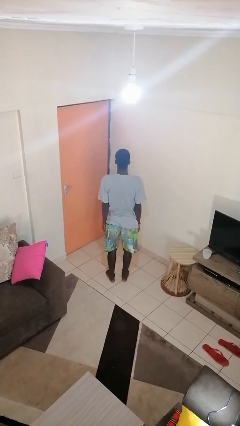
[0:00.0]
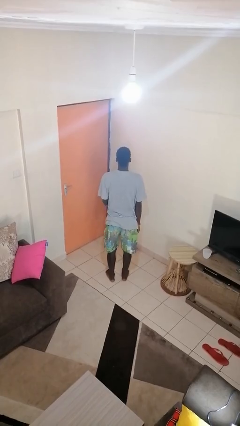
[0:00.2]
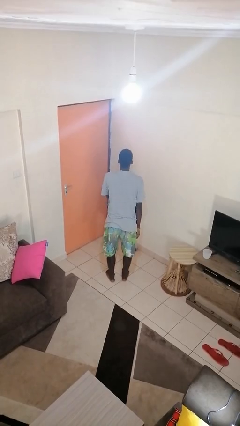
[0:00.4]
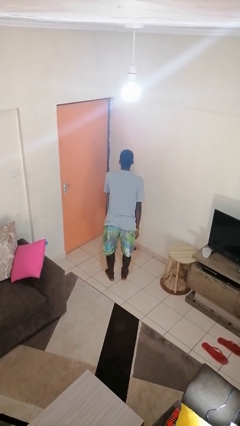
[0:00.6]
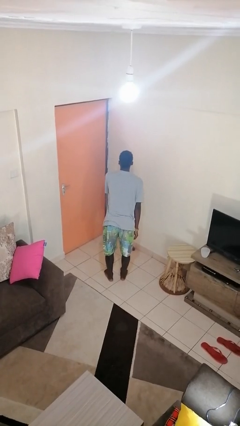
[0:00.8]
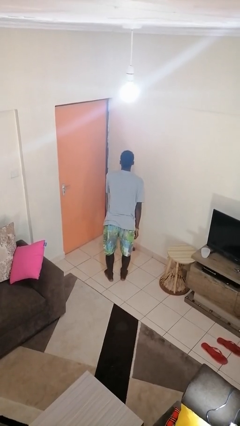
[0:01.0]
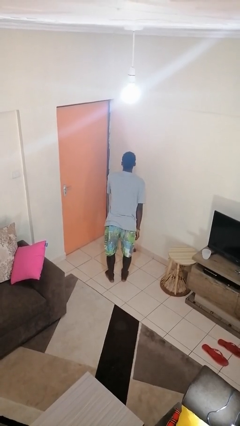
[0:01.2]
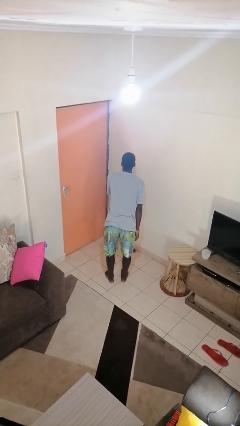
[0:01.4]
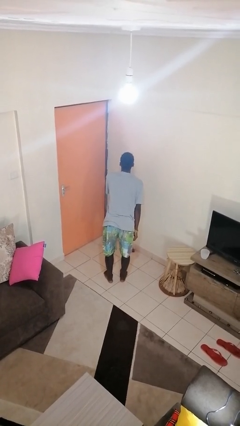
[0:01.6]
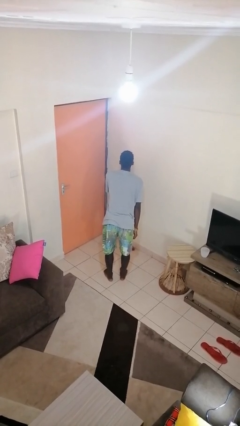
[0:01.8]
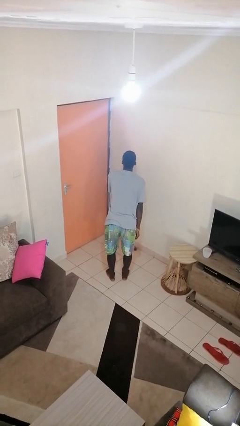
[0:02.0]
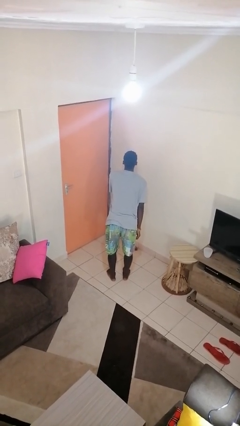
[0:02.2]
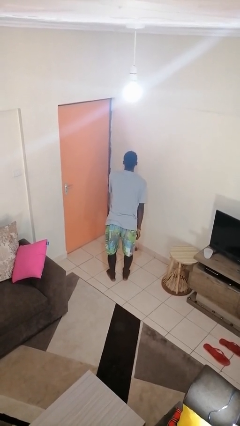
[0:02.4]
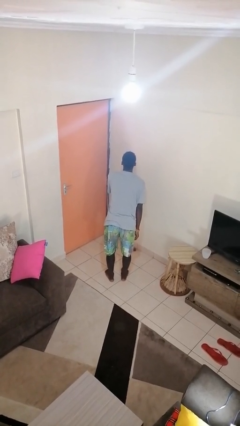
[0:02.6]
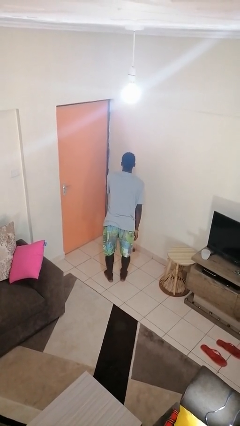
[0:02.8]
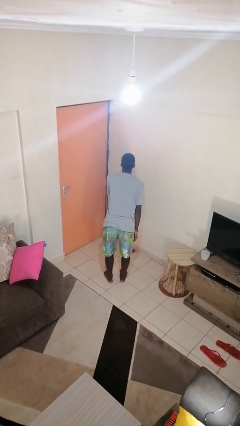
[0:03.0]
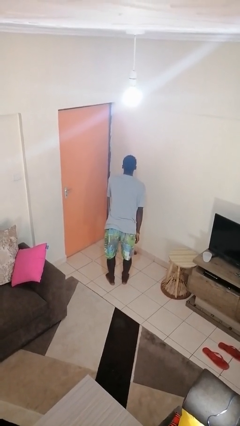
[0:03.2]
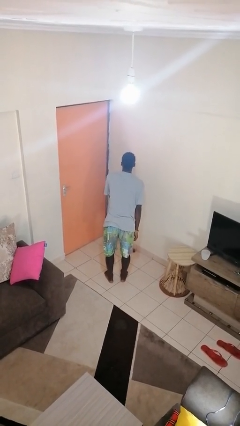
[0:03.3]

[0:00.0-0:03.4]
person gestures be quiet

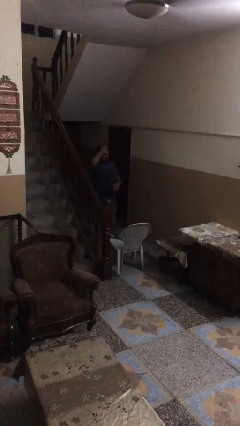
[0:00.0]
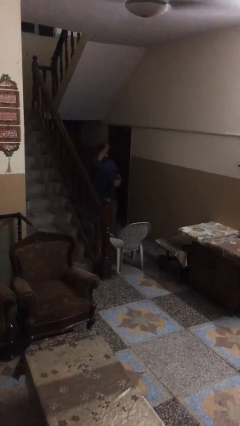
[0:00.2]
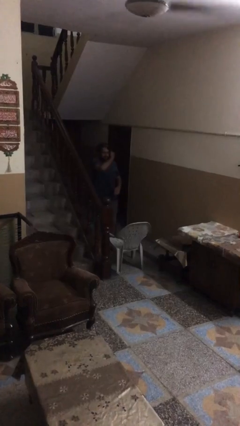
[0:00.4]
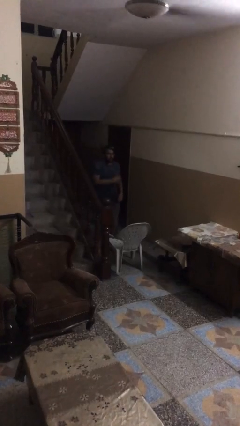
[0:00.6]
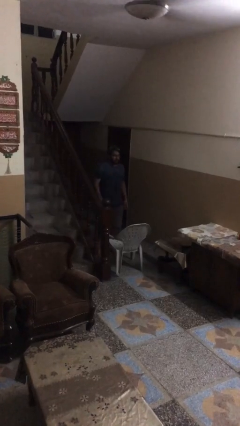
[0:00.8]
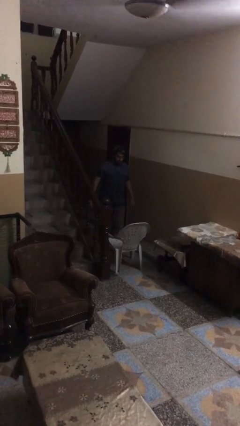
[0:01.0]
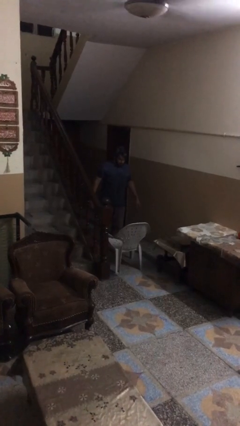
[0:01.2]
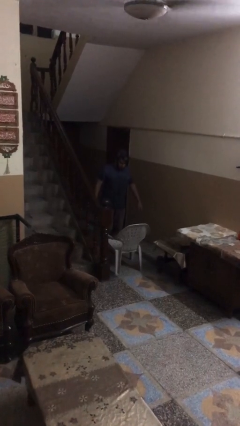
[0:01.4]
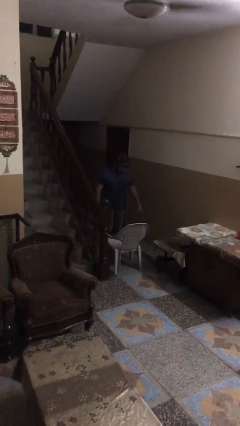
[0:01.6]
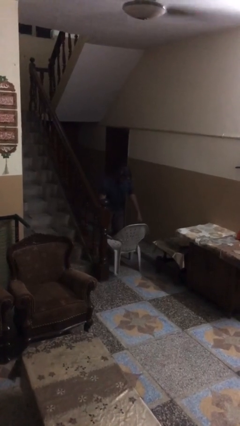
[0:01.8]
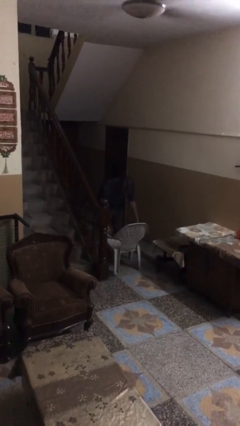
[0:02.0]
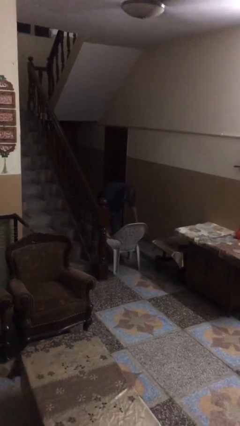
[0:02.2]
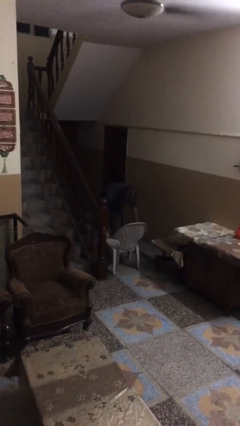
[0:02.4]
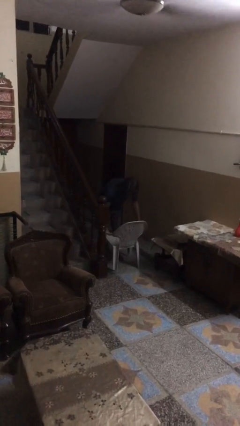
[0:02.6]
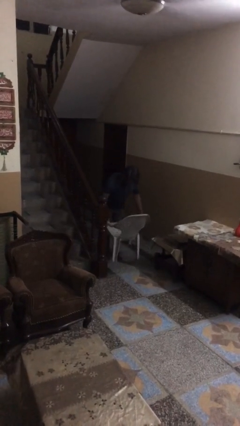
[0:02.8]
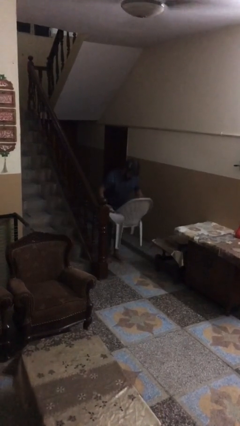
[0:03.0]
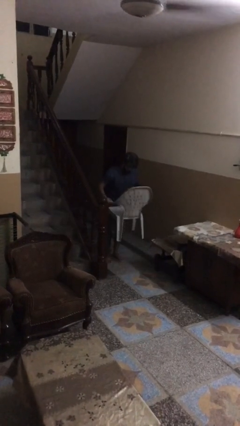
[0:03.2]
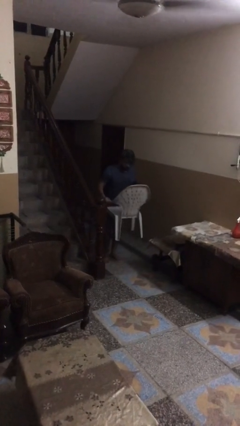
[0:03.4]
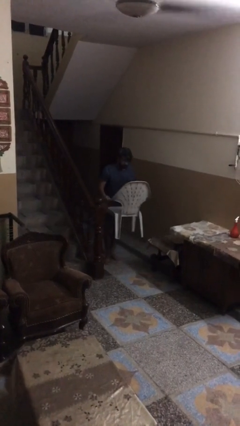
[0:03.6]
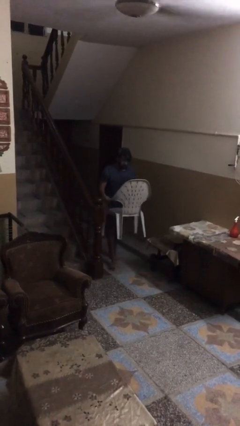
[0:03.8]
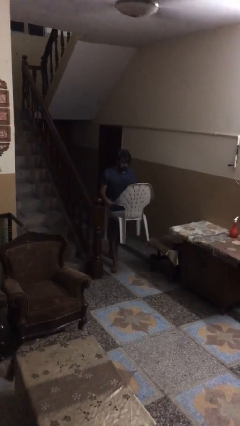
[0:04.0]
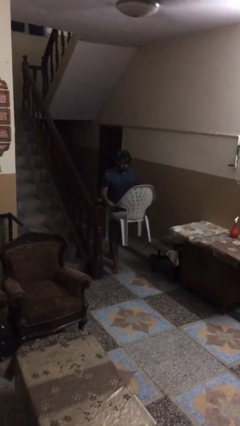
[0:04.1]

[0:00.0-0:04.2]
person picks up object from floor

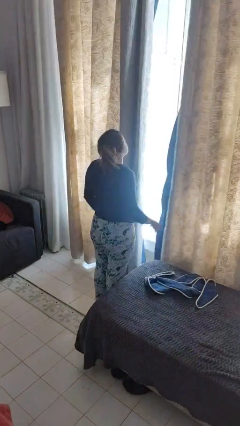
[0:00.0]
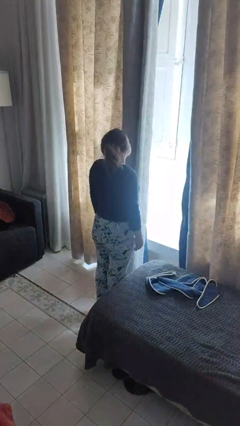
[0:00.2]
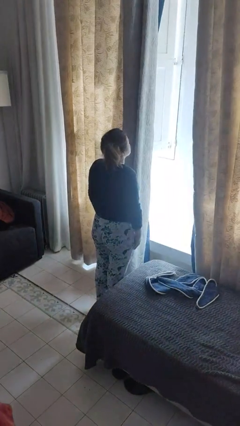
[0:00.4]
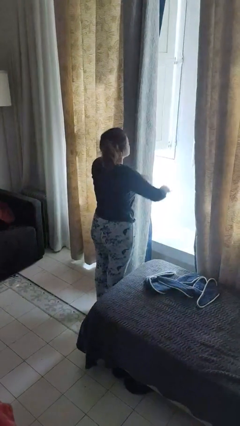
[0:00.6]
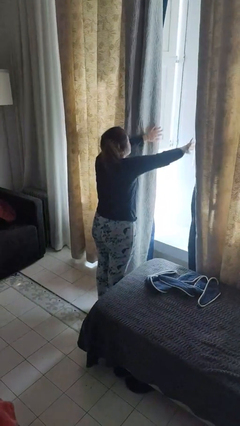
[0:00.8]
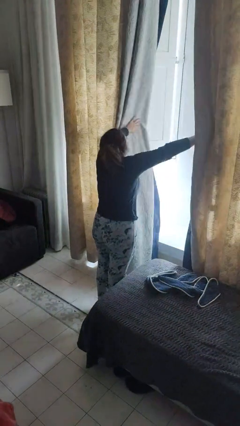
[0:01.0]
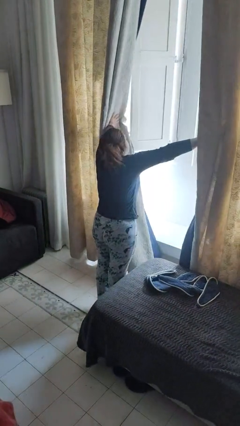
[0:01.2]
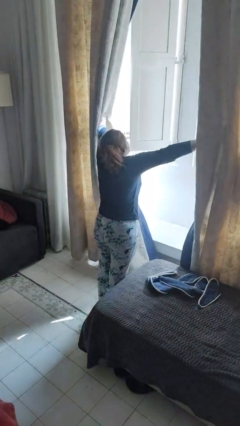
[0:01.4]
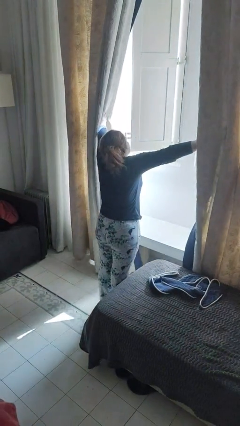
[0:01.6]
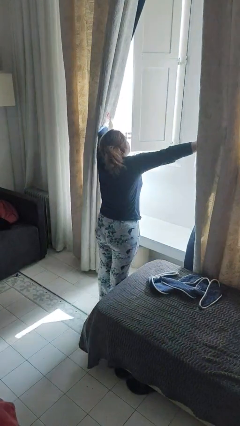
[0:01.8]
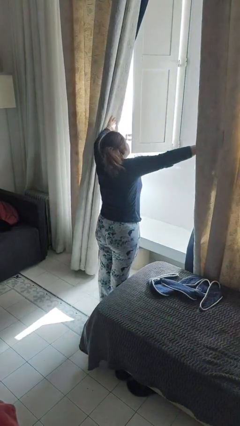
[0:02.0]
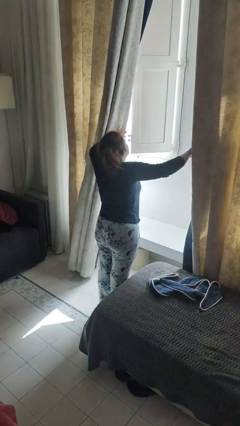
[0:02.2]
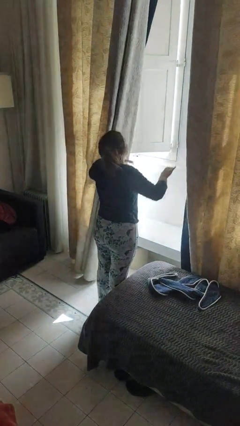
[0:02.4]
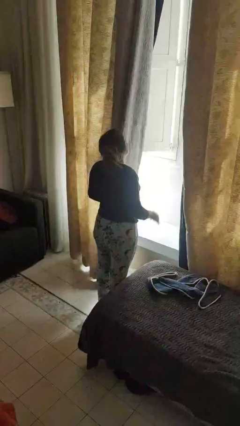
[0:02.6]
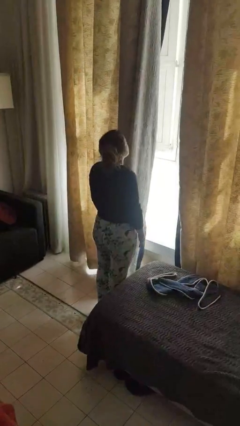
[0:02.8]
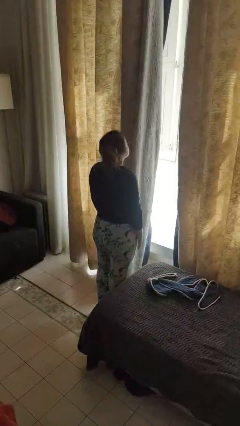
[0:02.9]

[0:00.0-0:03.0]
person opens curtains

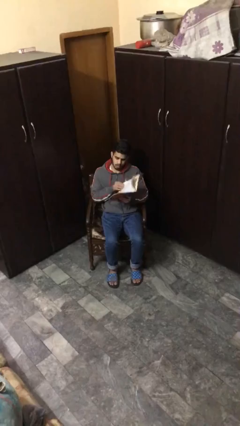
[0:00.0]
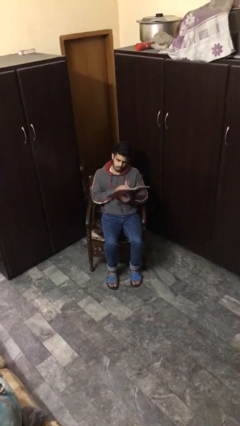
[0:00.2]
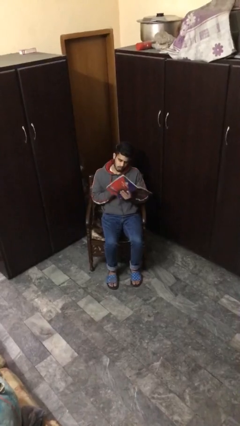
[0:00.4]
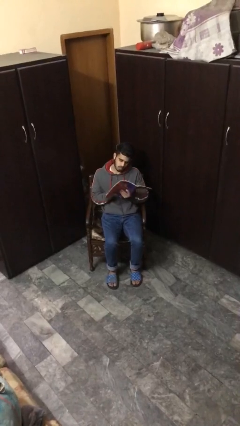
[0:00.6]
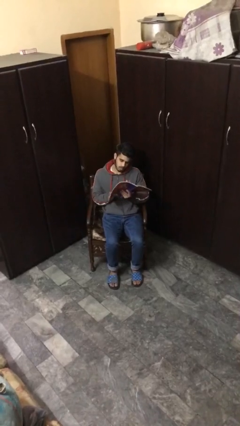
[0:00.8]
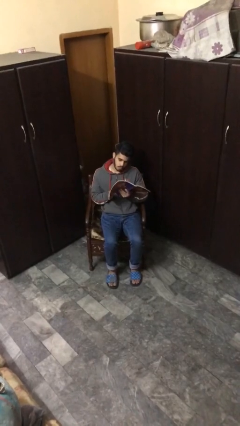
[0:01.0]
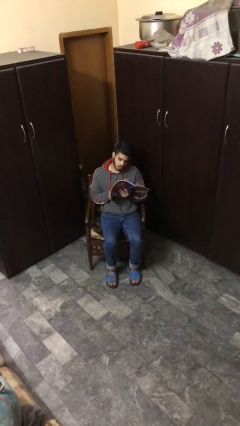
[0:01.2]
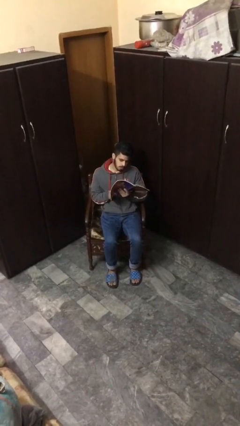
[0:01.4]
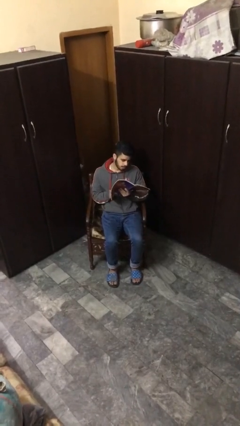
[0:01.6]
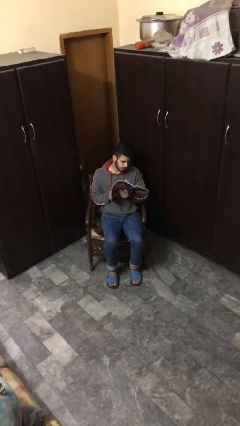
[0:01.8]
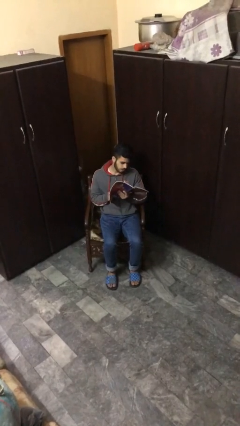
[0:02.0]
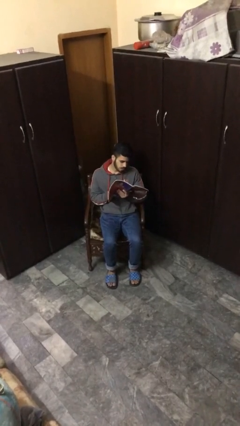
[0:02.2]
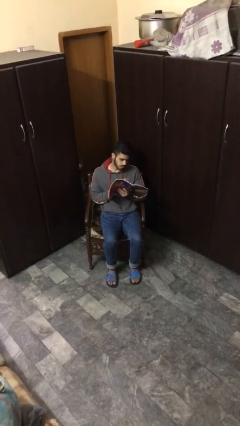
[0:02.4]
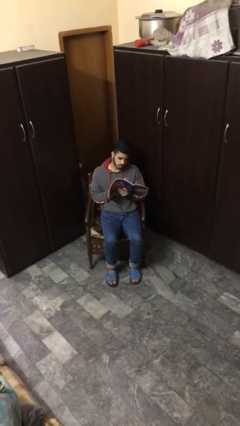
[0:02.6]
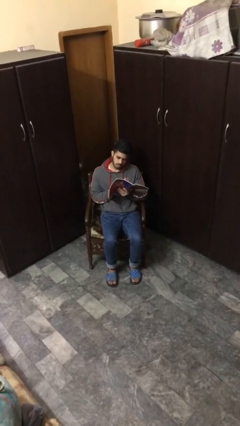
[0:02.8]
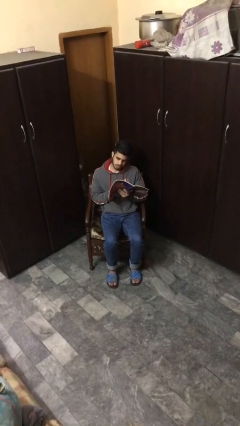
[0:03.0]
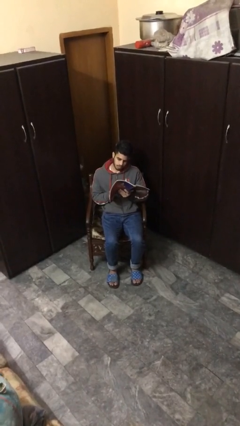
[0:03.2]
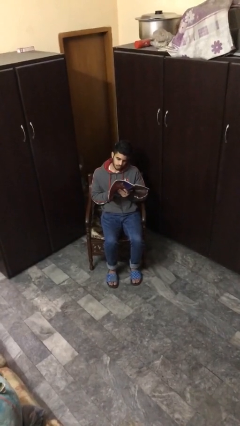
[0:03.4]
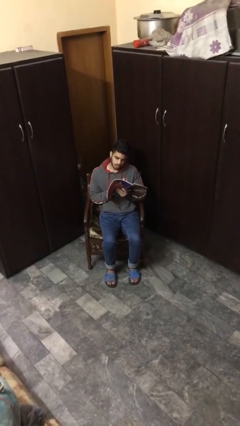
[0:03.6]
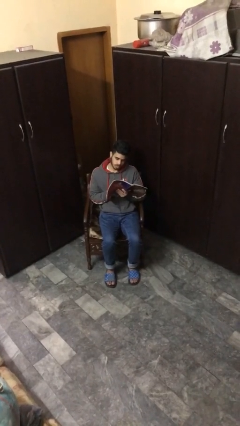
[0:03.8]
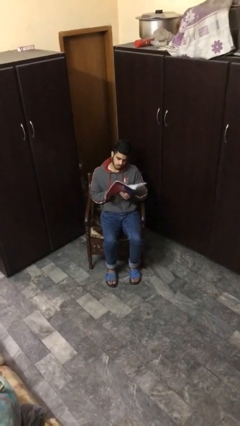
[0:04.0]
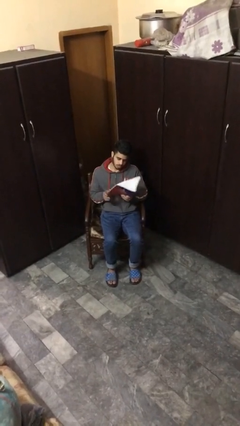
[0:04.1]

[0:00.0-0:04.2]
person reads document

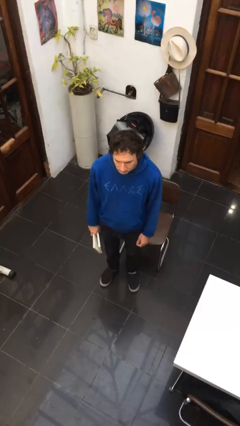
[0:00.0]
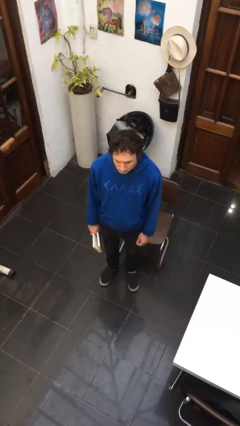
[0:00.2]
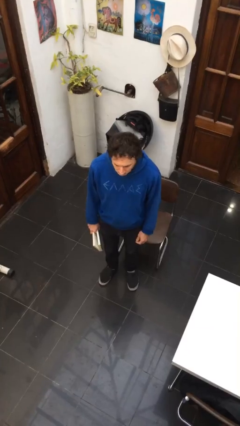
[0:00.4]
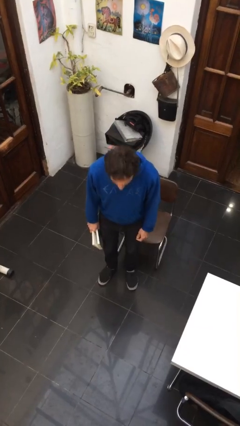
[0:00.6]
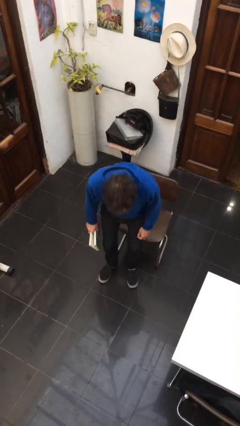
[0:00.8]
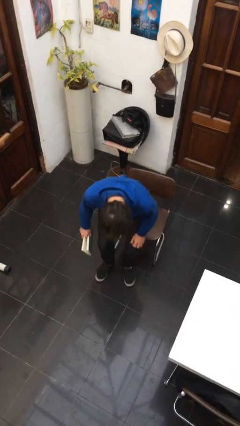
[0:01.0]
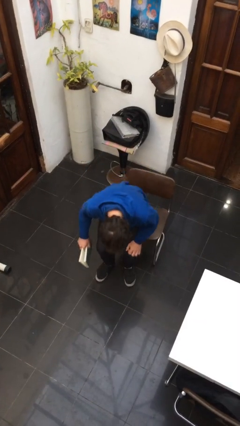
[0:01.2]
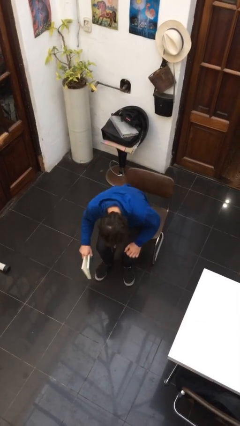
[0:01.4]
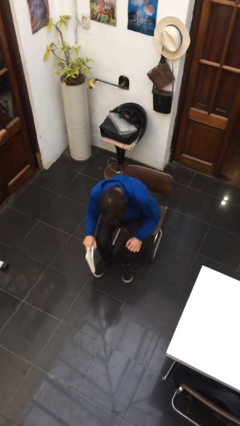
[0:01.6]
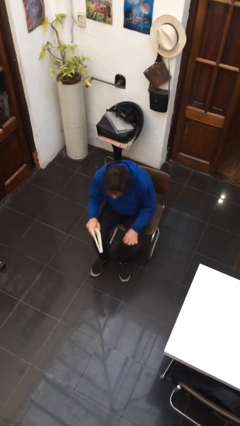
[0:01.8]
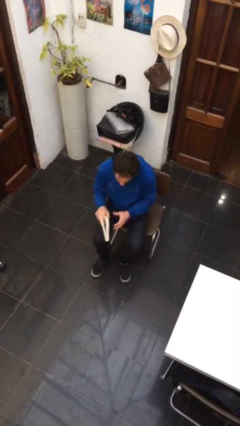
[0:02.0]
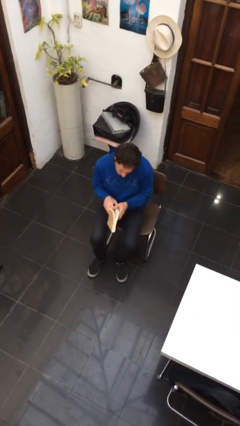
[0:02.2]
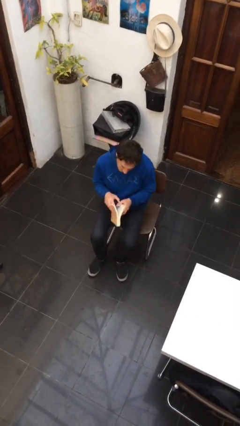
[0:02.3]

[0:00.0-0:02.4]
person sits down
